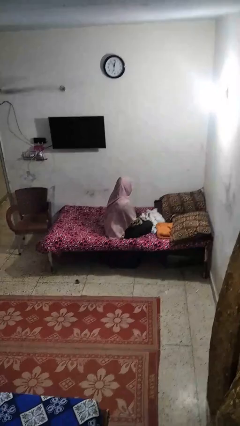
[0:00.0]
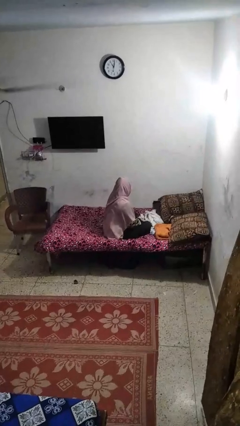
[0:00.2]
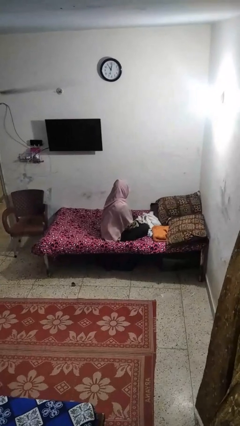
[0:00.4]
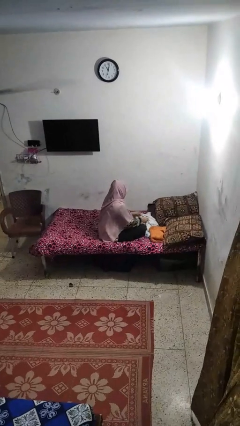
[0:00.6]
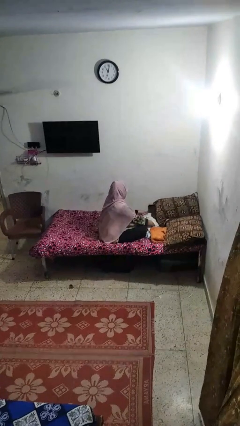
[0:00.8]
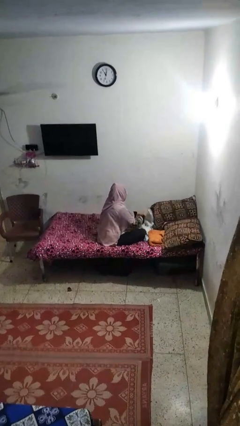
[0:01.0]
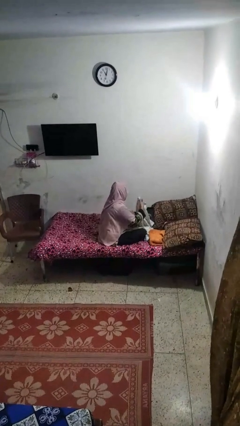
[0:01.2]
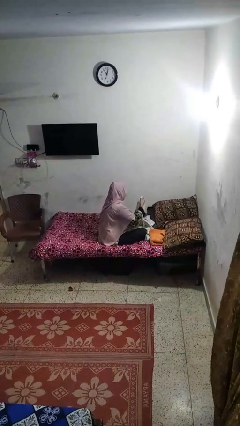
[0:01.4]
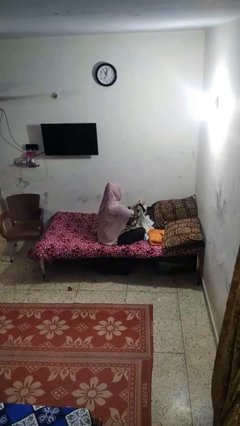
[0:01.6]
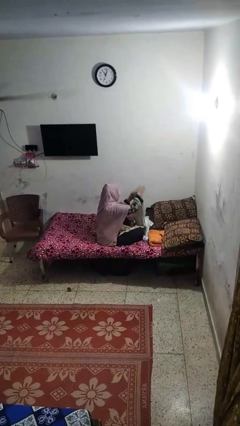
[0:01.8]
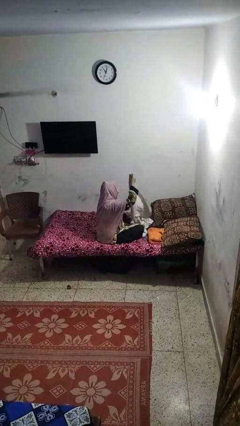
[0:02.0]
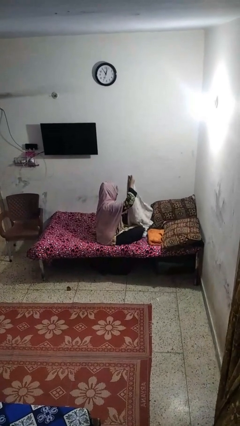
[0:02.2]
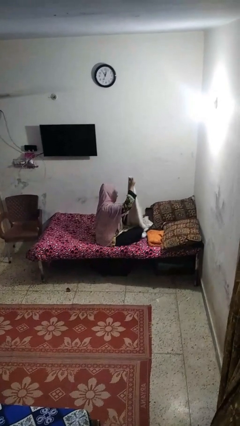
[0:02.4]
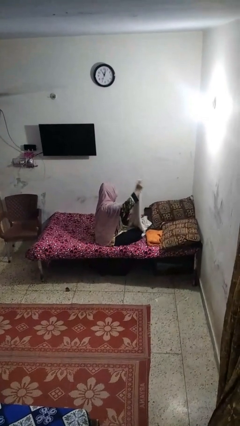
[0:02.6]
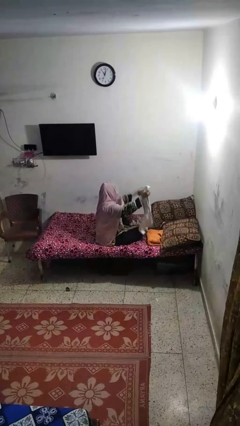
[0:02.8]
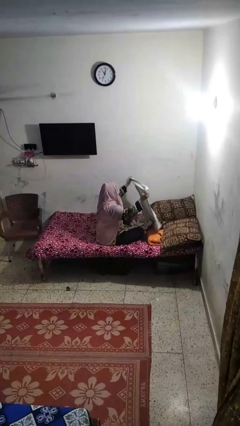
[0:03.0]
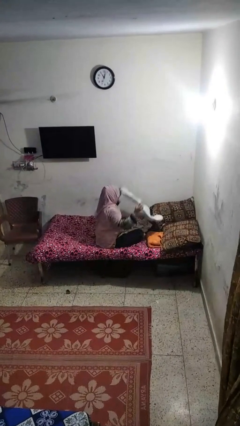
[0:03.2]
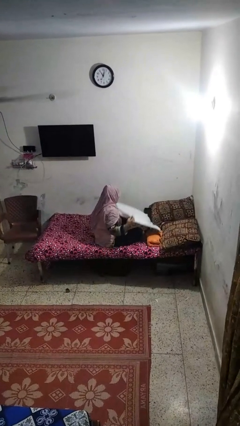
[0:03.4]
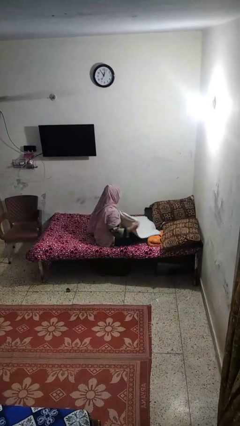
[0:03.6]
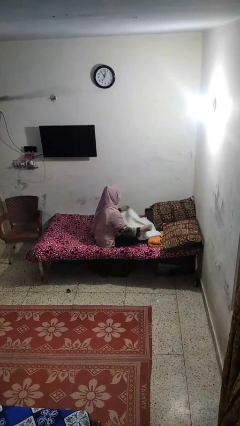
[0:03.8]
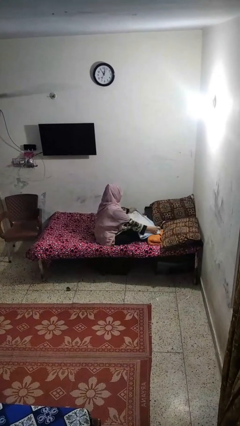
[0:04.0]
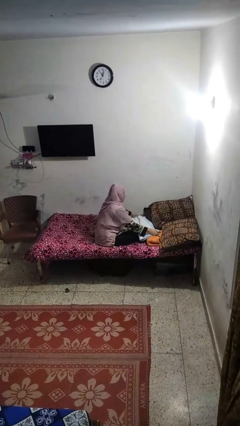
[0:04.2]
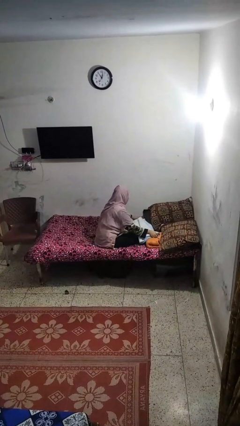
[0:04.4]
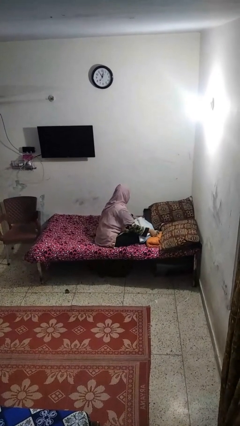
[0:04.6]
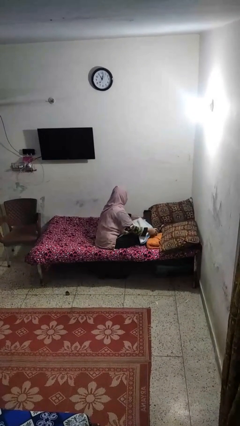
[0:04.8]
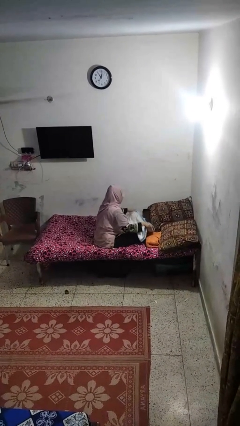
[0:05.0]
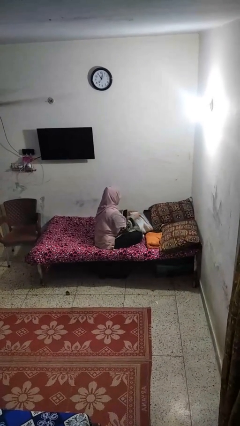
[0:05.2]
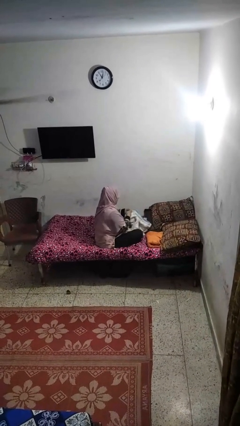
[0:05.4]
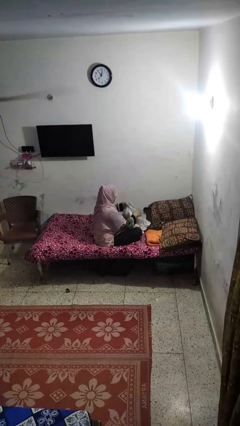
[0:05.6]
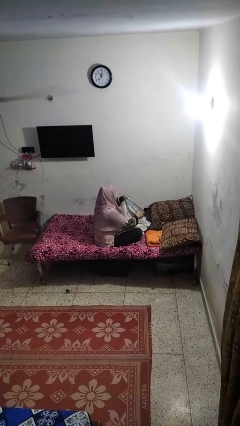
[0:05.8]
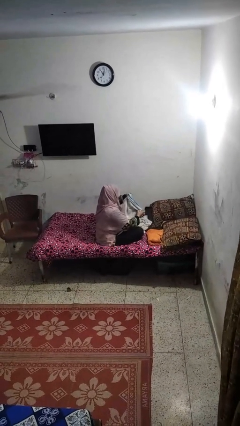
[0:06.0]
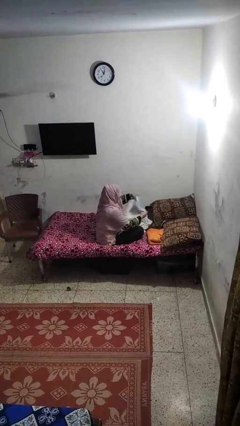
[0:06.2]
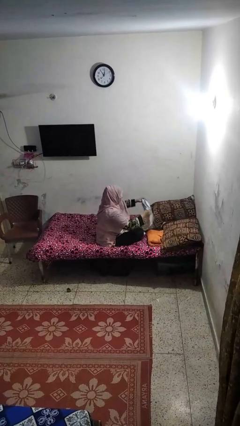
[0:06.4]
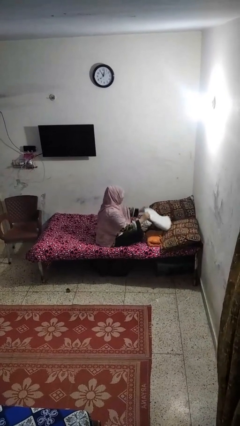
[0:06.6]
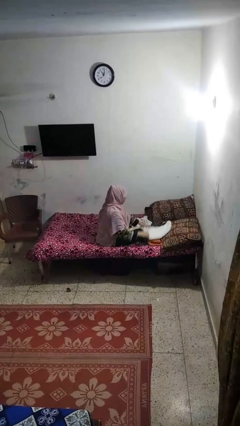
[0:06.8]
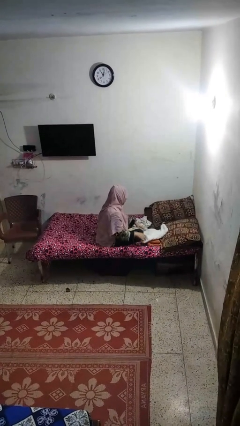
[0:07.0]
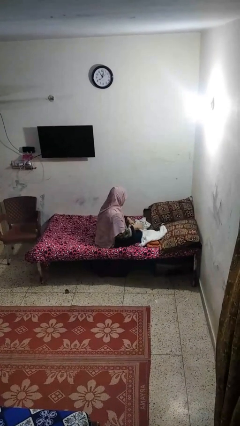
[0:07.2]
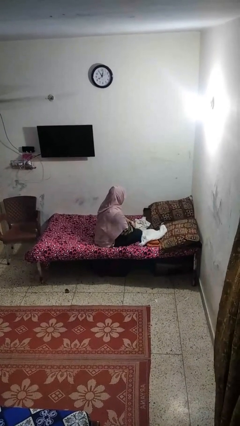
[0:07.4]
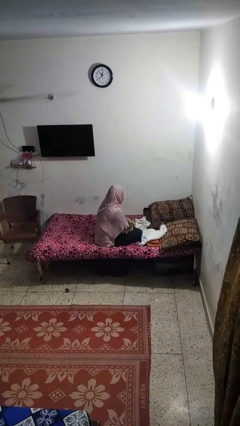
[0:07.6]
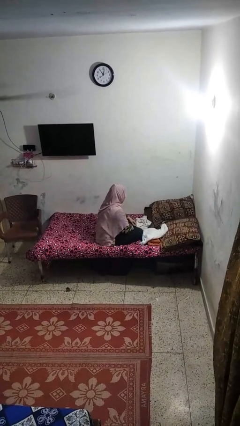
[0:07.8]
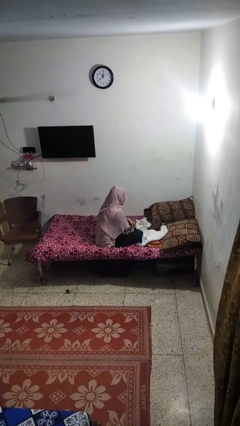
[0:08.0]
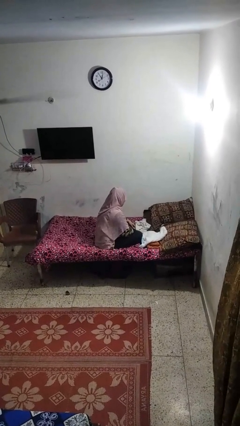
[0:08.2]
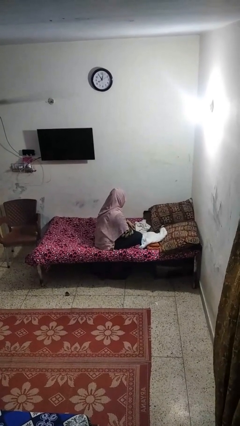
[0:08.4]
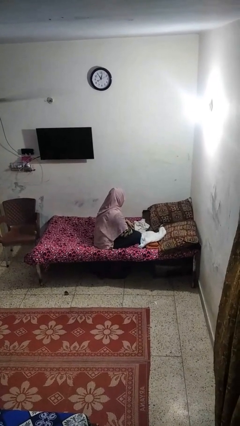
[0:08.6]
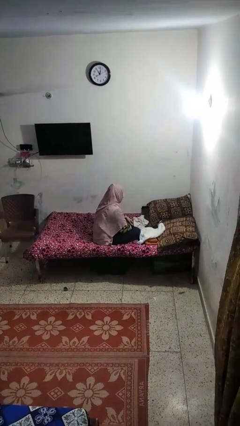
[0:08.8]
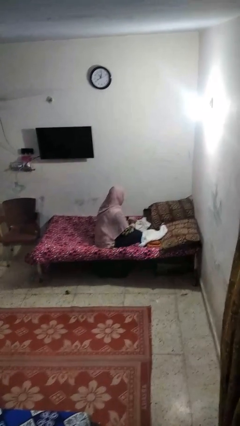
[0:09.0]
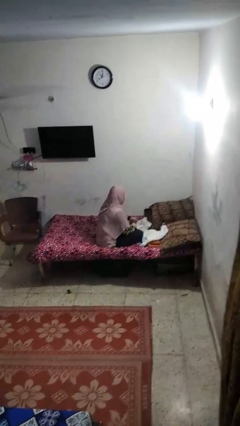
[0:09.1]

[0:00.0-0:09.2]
person folds towel

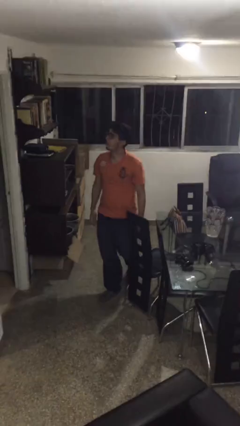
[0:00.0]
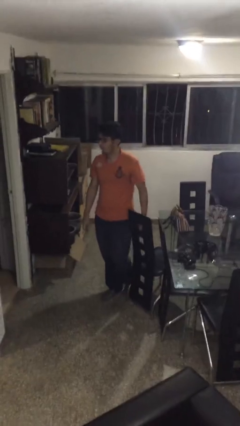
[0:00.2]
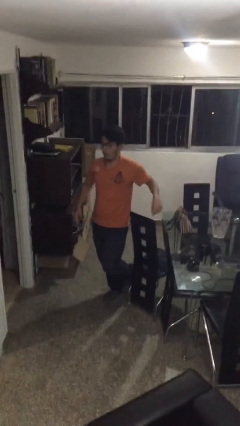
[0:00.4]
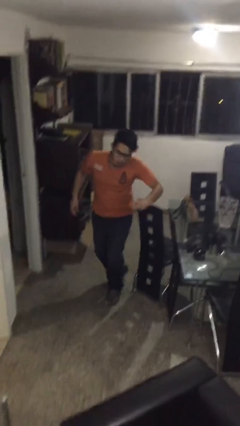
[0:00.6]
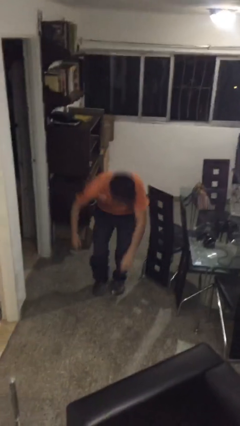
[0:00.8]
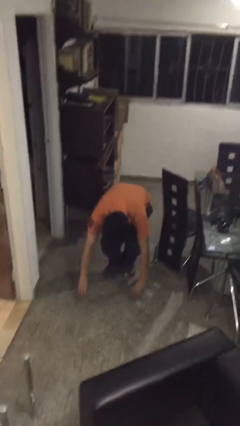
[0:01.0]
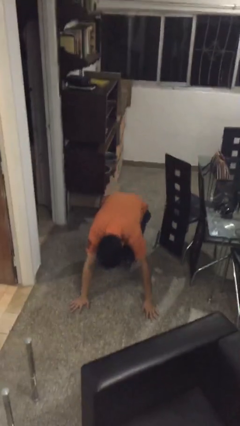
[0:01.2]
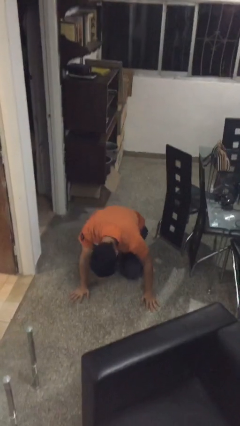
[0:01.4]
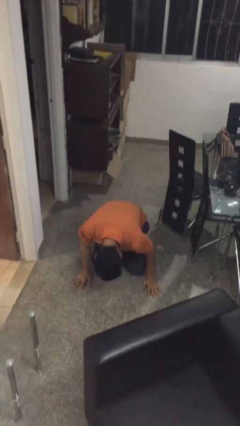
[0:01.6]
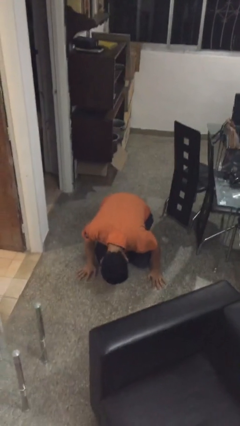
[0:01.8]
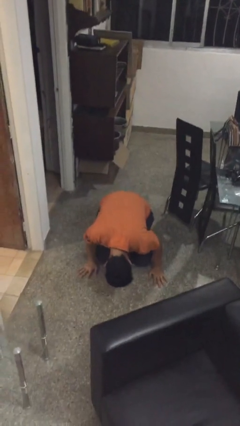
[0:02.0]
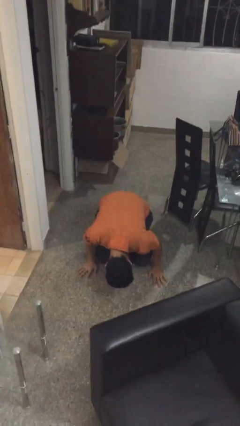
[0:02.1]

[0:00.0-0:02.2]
person trips on object on floor

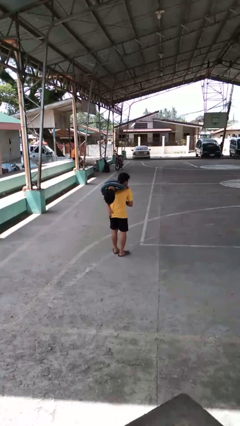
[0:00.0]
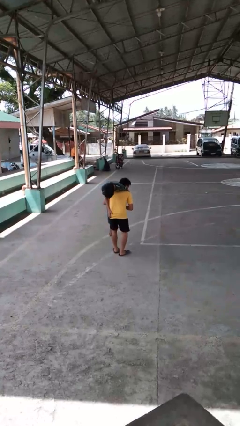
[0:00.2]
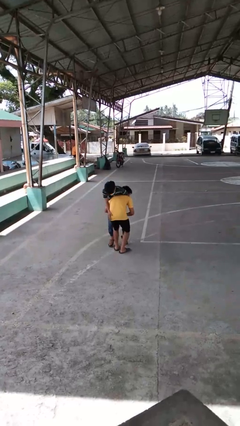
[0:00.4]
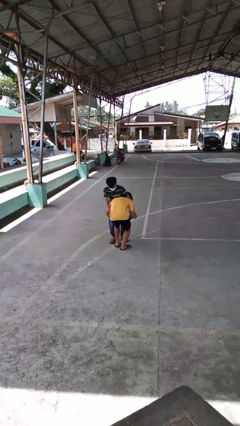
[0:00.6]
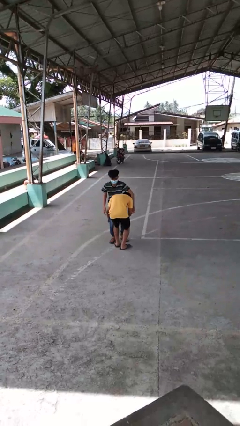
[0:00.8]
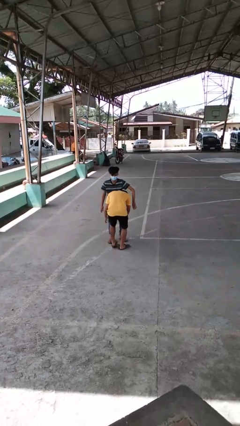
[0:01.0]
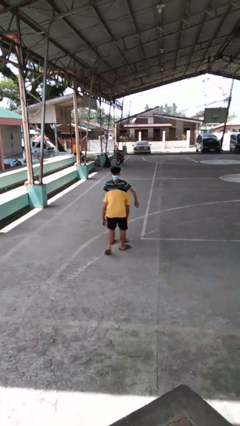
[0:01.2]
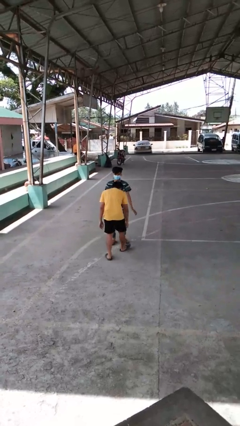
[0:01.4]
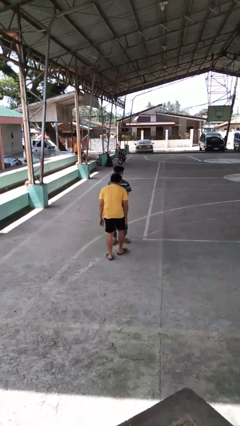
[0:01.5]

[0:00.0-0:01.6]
person puts down person

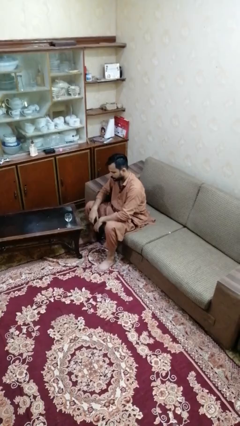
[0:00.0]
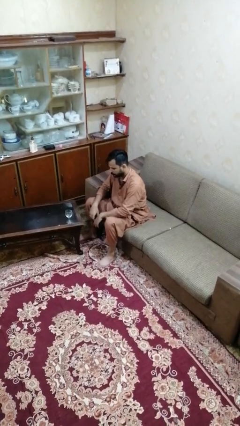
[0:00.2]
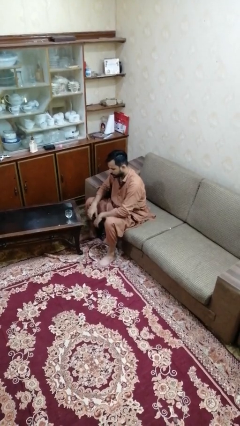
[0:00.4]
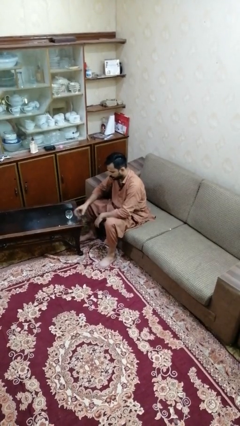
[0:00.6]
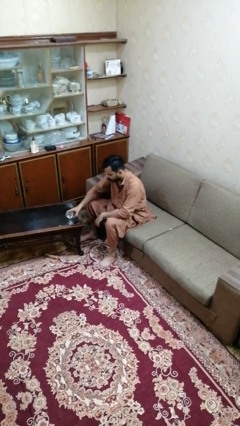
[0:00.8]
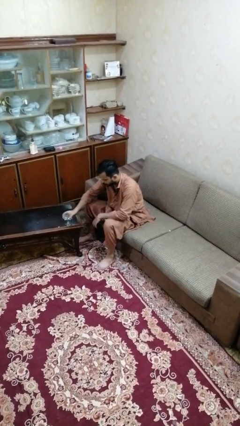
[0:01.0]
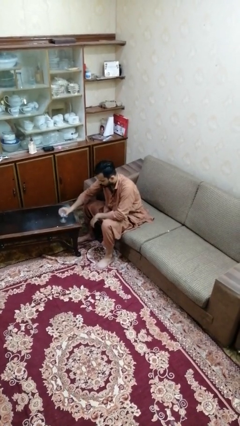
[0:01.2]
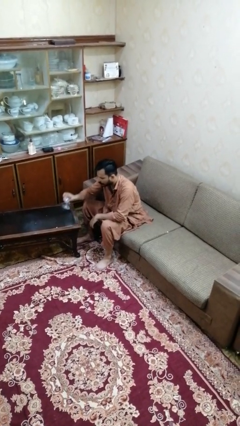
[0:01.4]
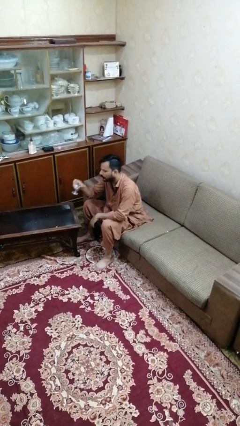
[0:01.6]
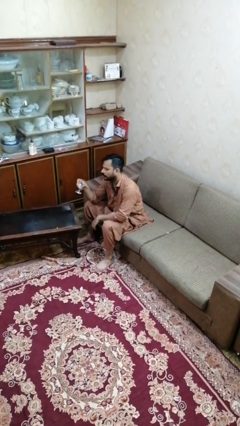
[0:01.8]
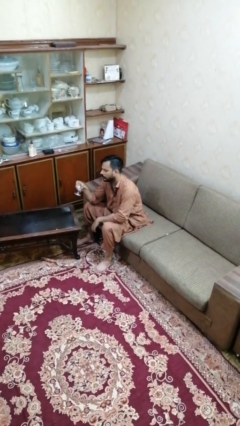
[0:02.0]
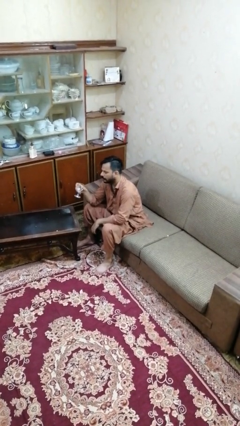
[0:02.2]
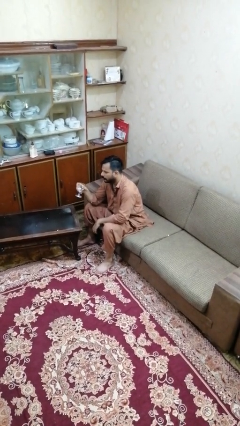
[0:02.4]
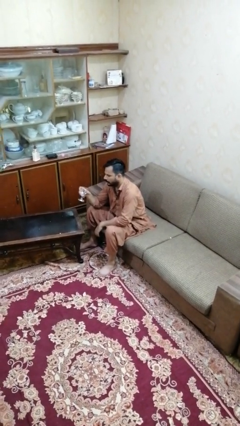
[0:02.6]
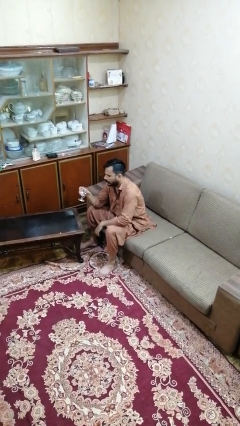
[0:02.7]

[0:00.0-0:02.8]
person picks up object from table

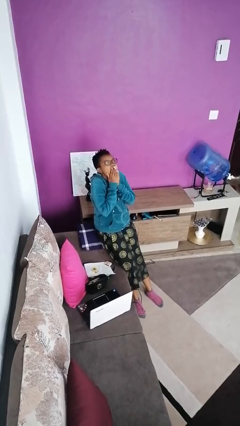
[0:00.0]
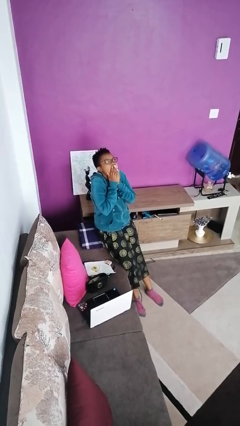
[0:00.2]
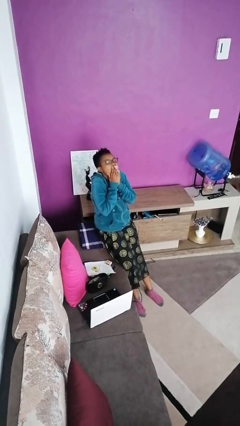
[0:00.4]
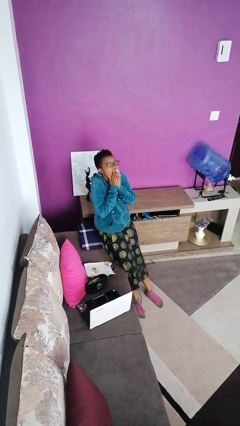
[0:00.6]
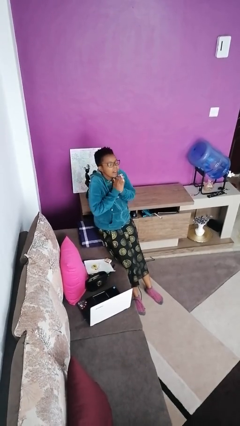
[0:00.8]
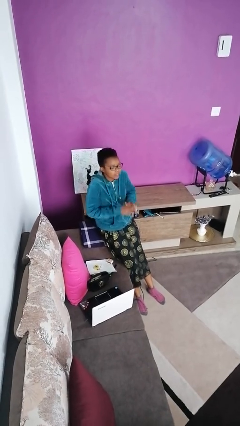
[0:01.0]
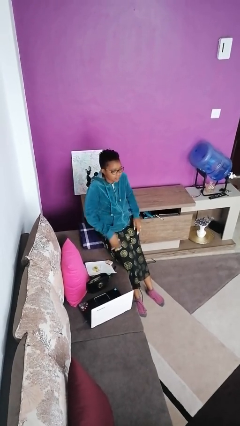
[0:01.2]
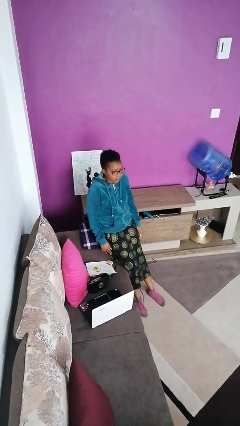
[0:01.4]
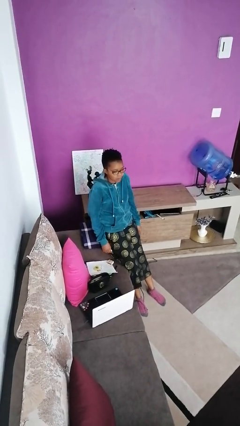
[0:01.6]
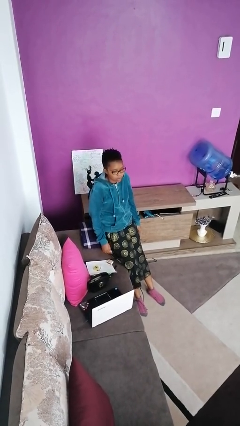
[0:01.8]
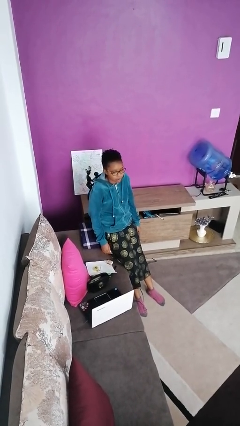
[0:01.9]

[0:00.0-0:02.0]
person closes cabinet
